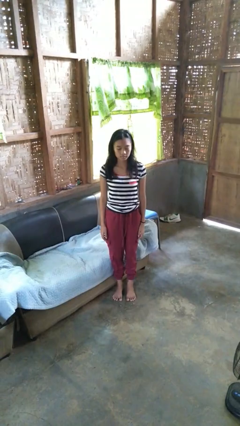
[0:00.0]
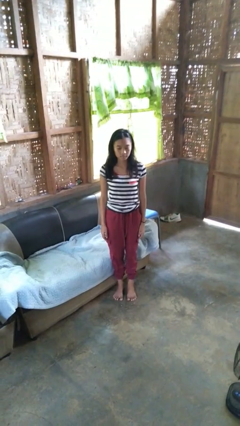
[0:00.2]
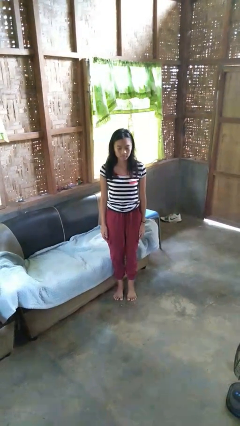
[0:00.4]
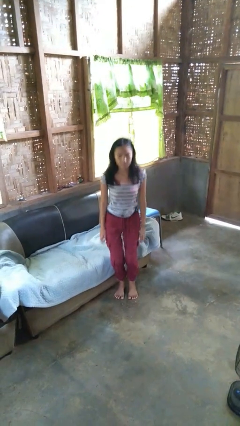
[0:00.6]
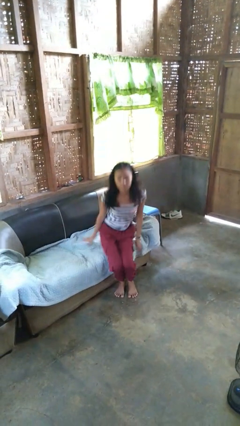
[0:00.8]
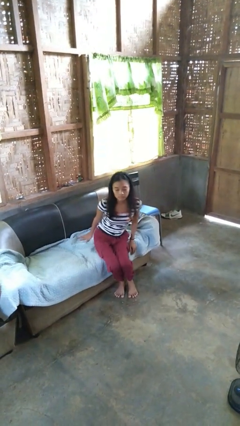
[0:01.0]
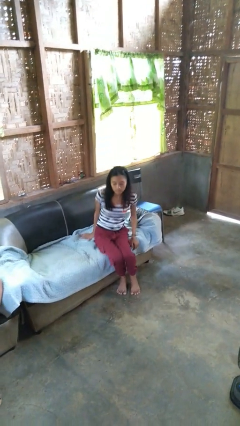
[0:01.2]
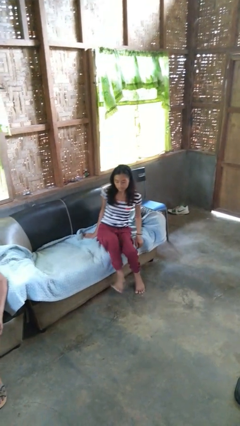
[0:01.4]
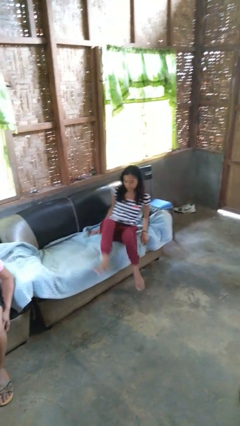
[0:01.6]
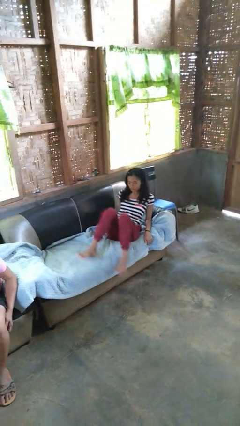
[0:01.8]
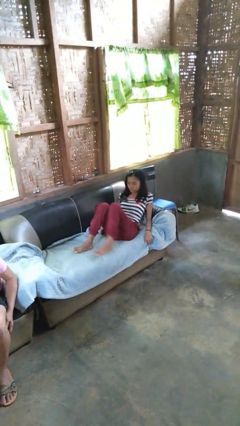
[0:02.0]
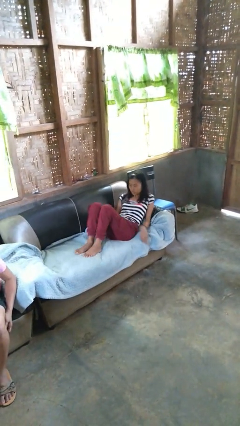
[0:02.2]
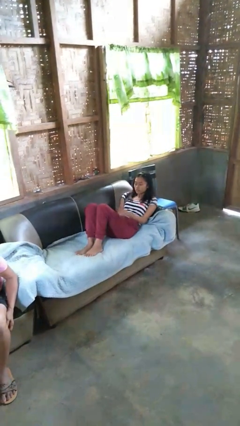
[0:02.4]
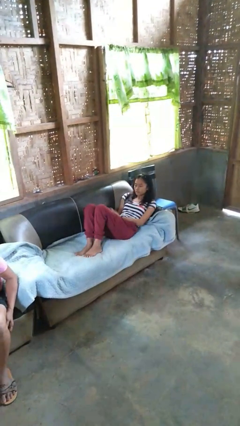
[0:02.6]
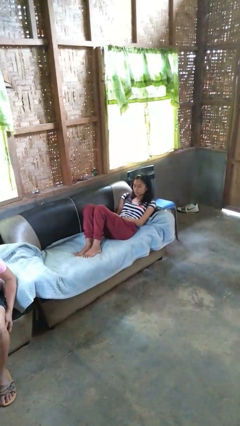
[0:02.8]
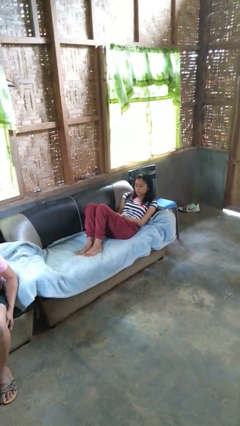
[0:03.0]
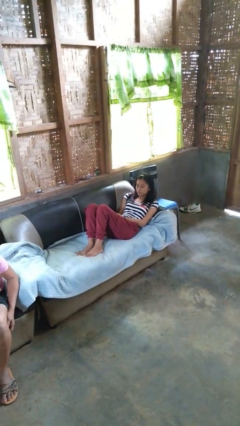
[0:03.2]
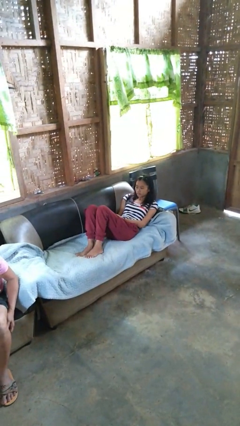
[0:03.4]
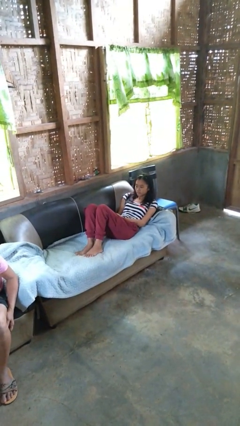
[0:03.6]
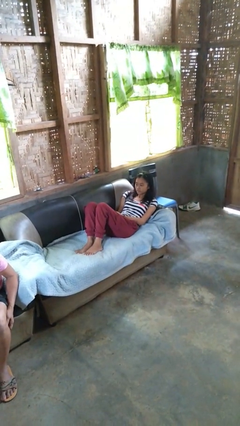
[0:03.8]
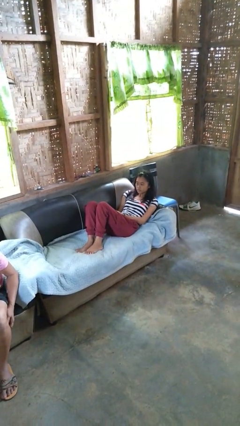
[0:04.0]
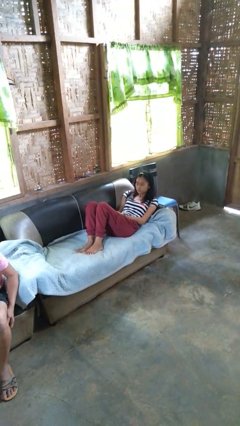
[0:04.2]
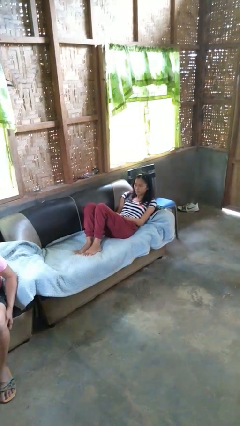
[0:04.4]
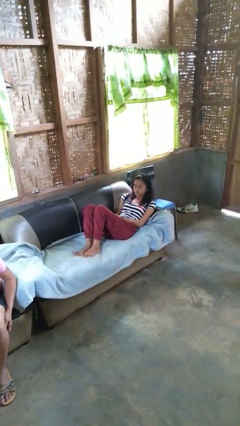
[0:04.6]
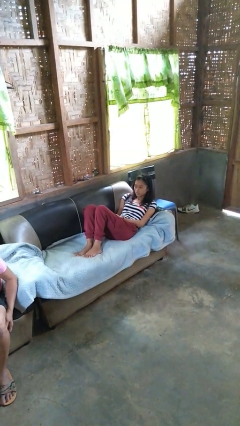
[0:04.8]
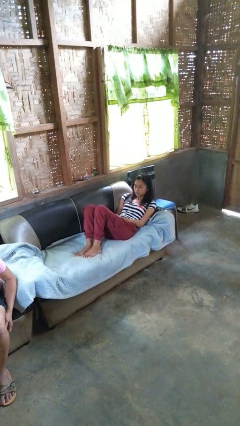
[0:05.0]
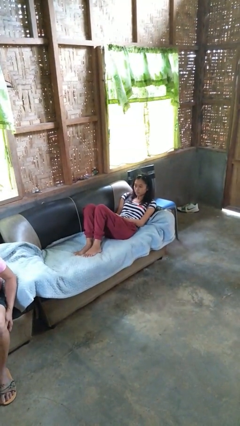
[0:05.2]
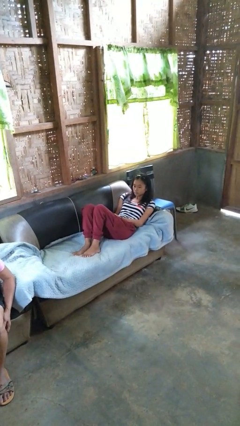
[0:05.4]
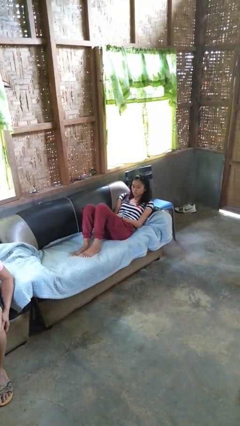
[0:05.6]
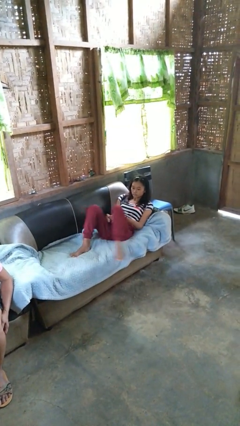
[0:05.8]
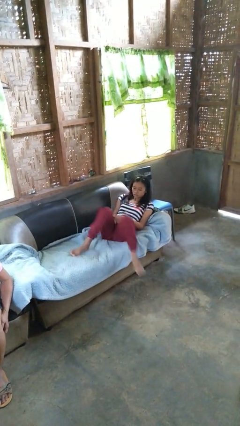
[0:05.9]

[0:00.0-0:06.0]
person lies down on couch

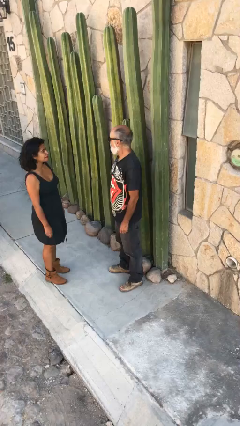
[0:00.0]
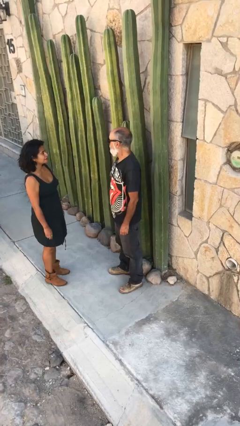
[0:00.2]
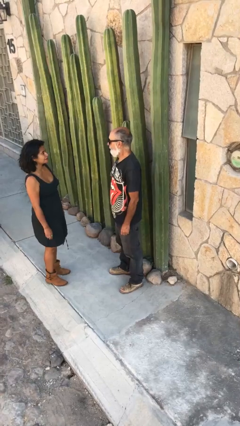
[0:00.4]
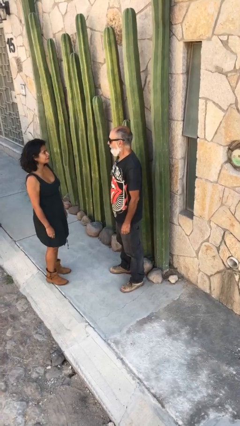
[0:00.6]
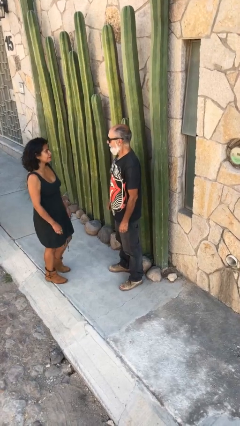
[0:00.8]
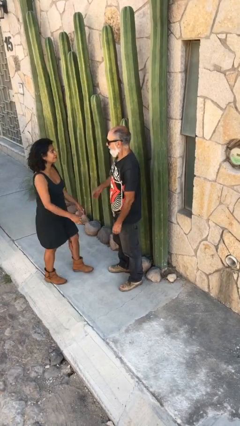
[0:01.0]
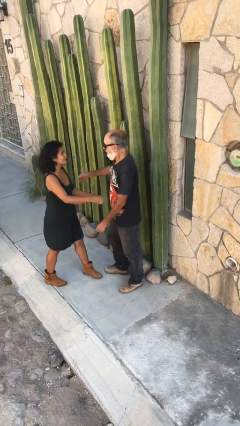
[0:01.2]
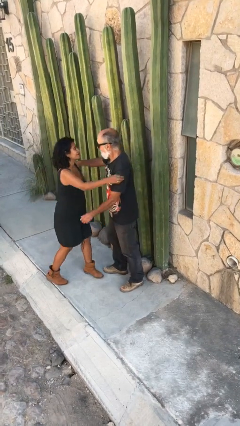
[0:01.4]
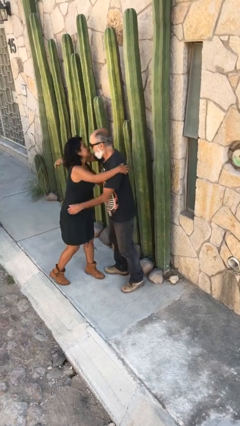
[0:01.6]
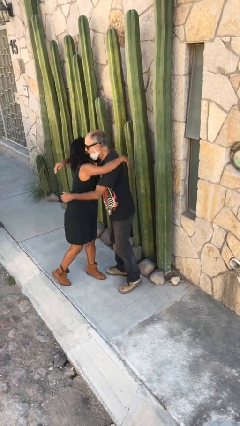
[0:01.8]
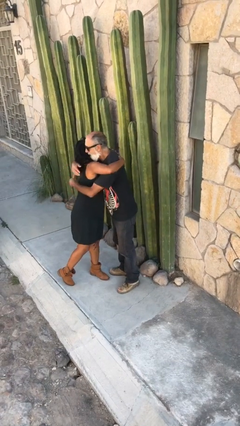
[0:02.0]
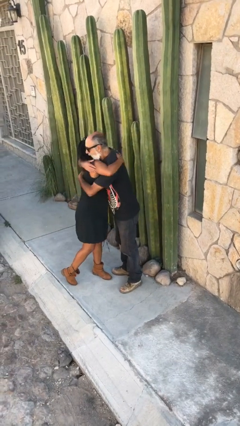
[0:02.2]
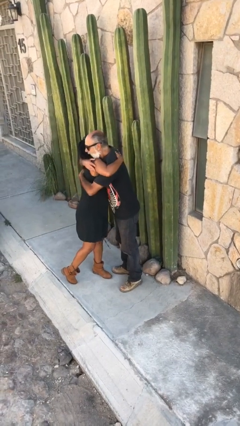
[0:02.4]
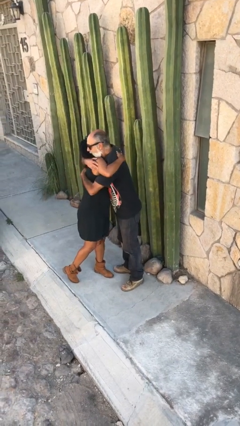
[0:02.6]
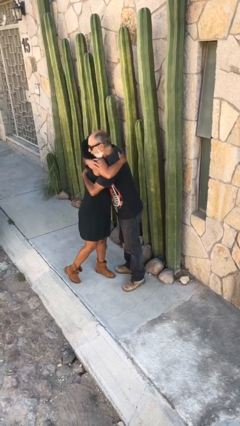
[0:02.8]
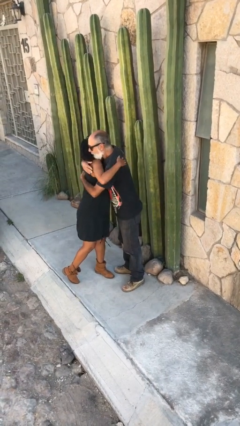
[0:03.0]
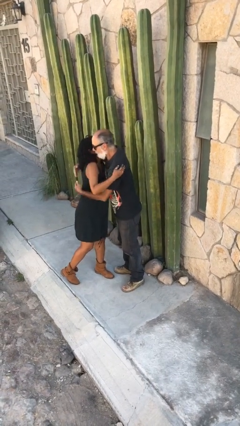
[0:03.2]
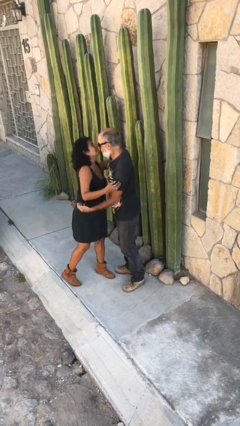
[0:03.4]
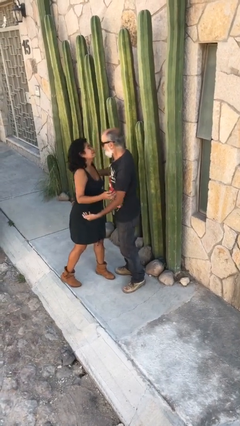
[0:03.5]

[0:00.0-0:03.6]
person embraces person

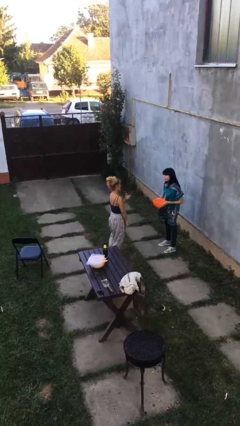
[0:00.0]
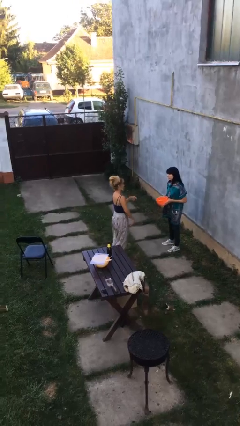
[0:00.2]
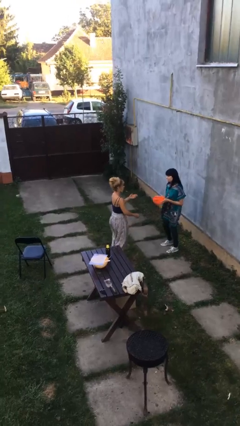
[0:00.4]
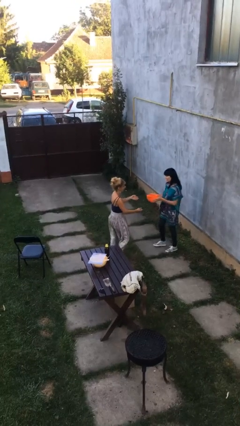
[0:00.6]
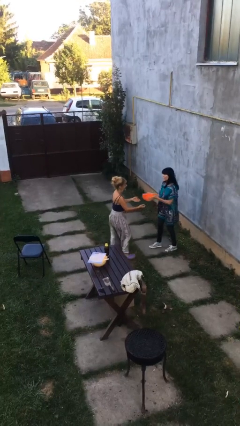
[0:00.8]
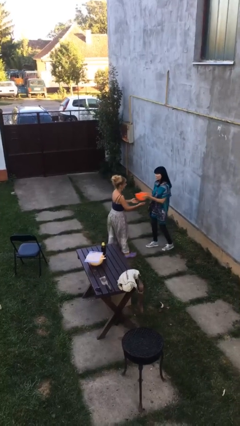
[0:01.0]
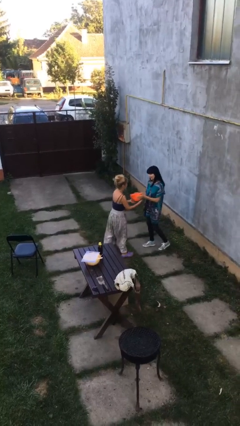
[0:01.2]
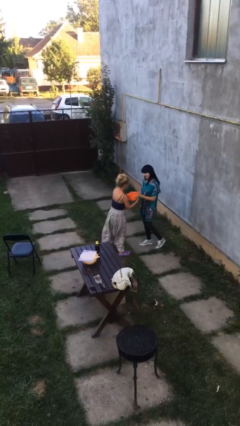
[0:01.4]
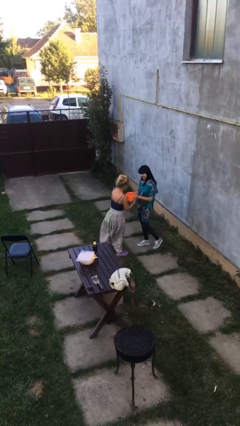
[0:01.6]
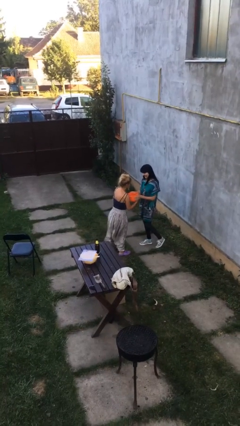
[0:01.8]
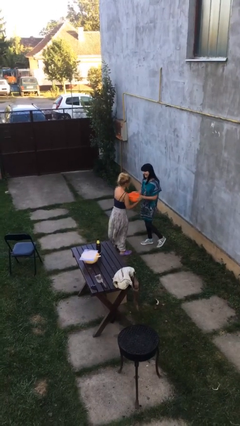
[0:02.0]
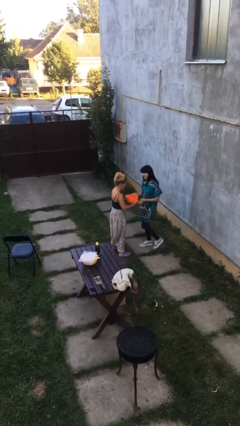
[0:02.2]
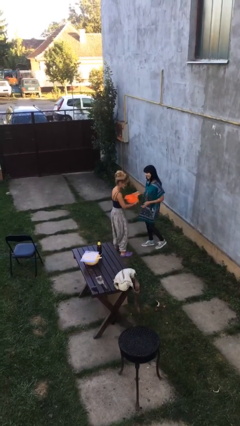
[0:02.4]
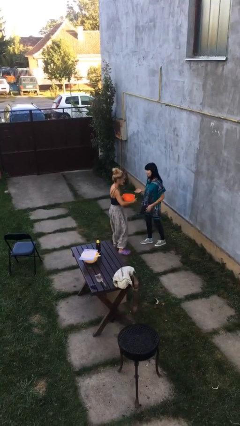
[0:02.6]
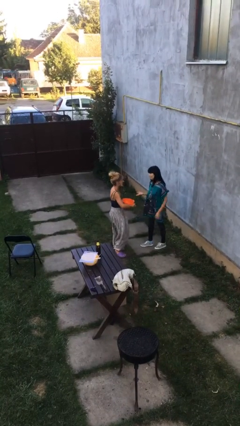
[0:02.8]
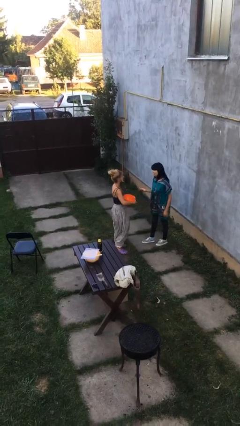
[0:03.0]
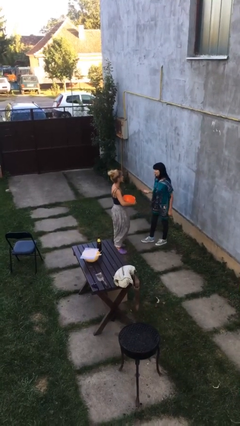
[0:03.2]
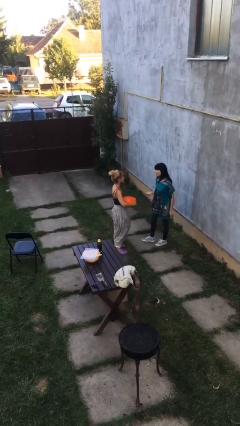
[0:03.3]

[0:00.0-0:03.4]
person transfers object to person

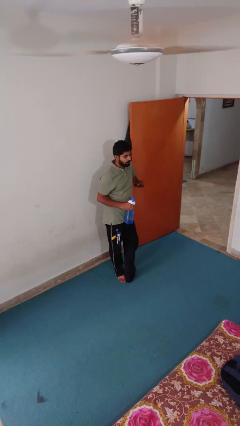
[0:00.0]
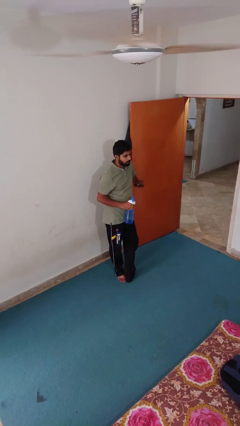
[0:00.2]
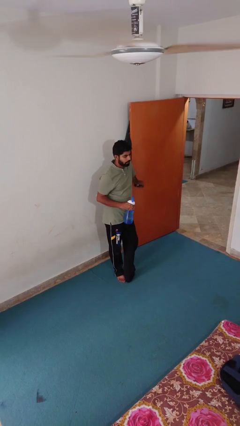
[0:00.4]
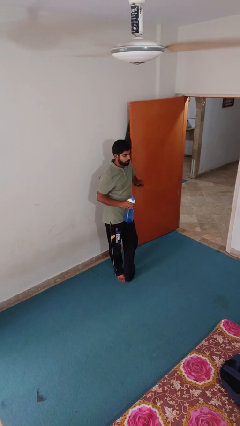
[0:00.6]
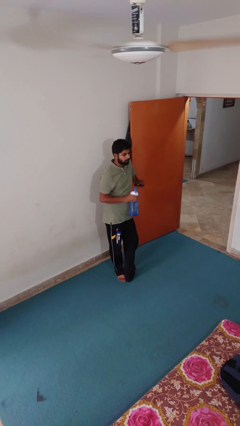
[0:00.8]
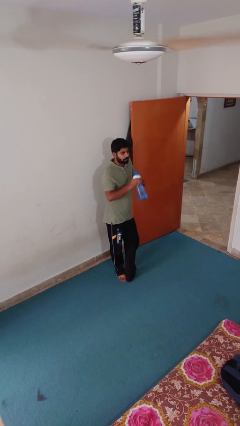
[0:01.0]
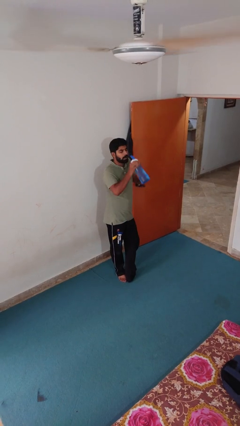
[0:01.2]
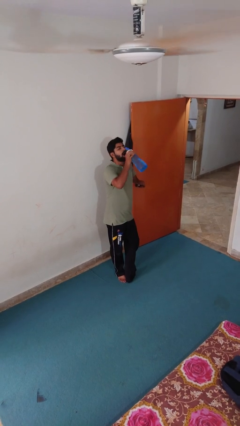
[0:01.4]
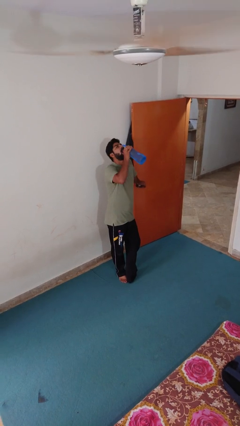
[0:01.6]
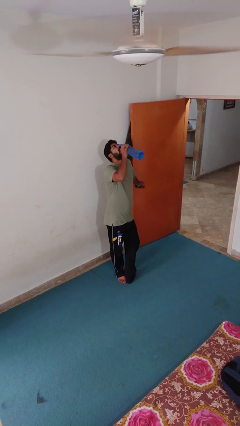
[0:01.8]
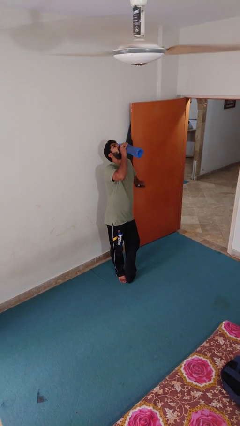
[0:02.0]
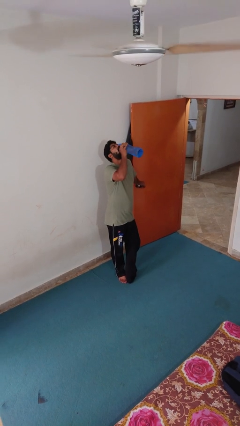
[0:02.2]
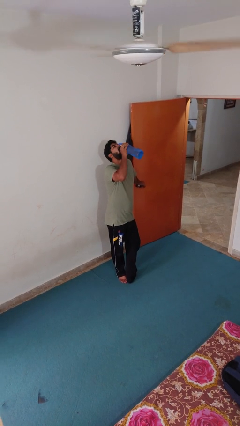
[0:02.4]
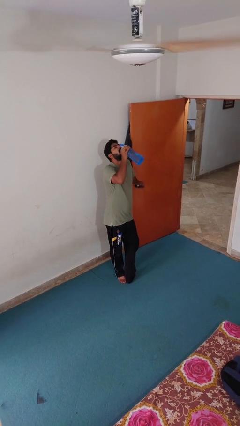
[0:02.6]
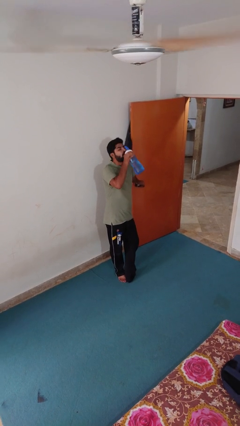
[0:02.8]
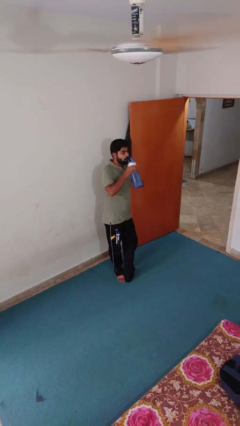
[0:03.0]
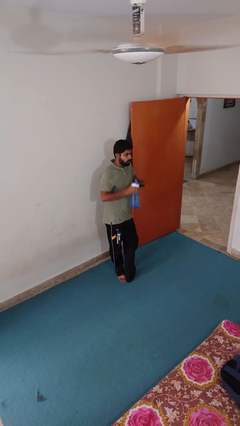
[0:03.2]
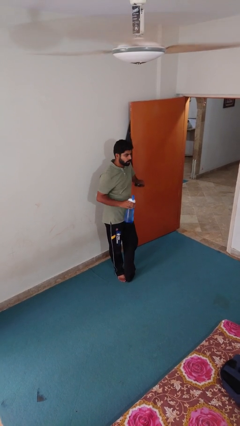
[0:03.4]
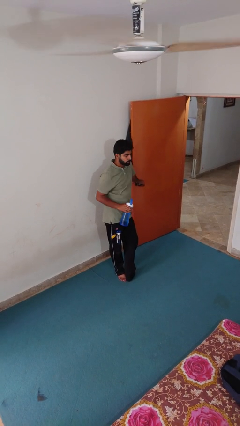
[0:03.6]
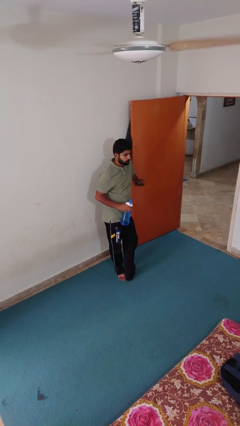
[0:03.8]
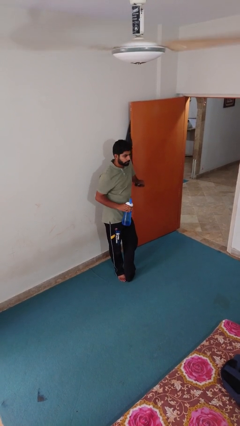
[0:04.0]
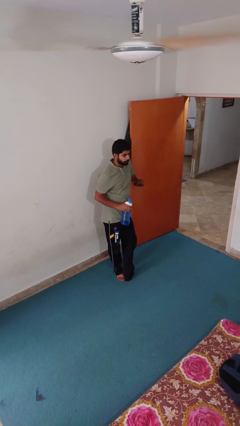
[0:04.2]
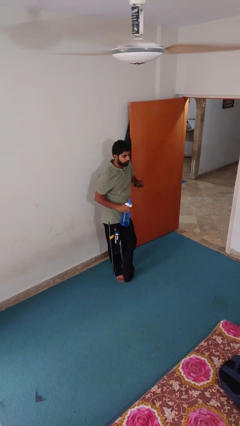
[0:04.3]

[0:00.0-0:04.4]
person drinks from bottle

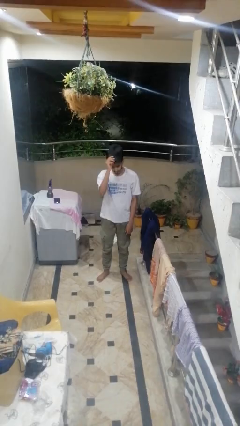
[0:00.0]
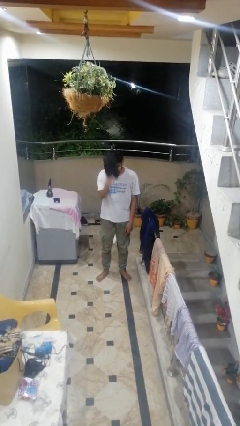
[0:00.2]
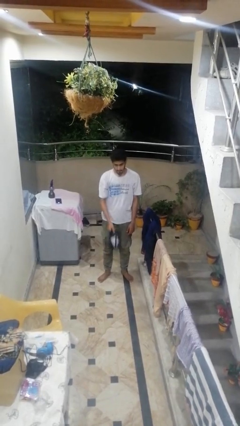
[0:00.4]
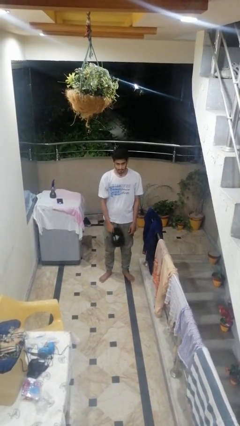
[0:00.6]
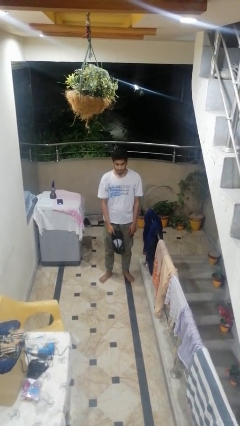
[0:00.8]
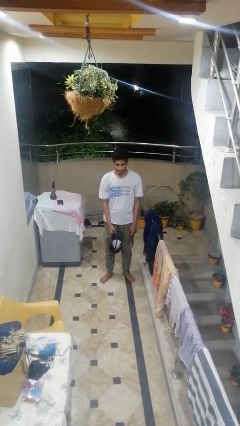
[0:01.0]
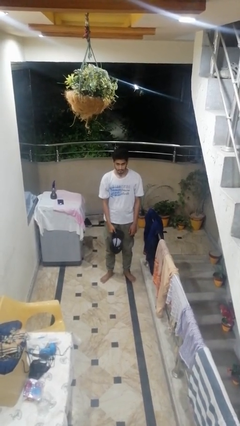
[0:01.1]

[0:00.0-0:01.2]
person takes off hat
